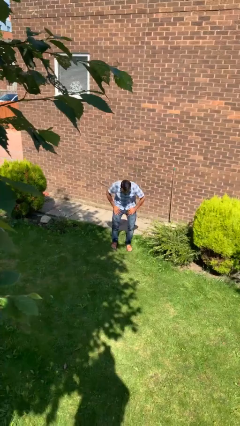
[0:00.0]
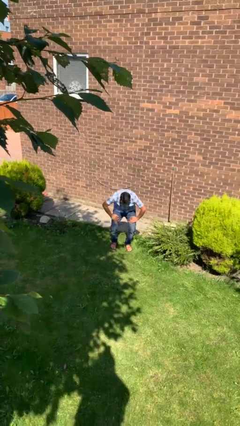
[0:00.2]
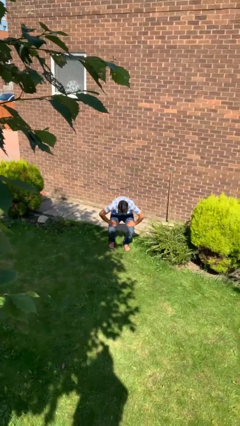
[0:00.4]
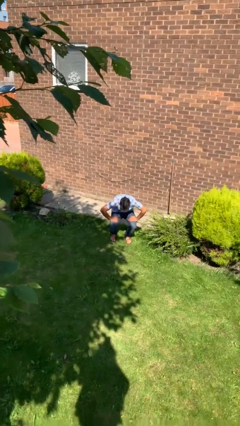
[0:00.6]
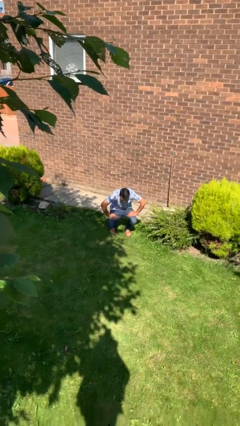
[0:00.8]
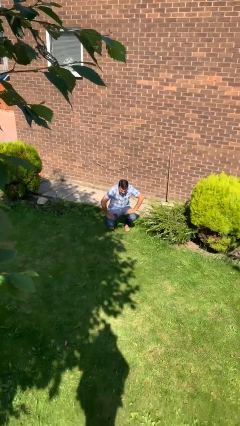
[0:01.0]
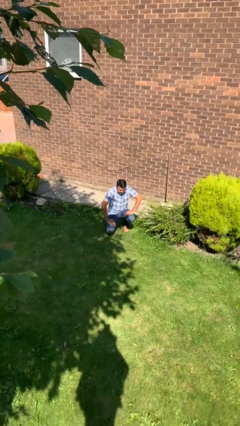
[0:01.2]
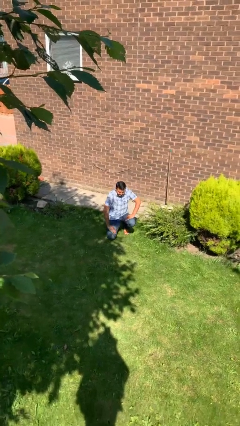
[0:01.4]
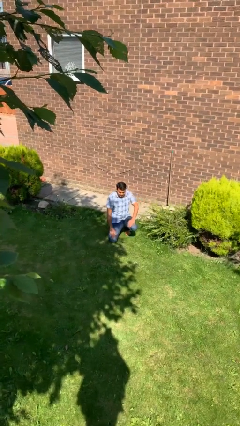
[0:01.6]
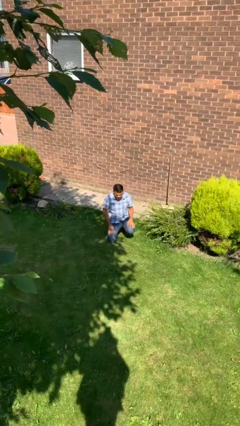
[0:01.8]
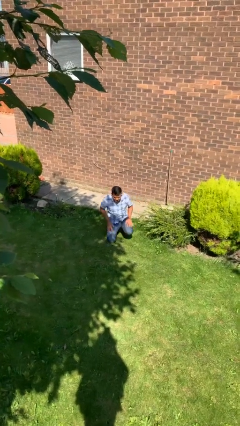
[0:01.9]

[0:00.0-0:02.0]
person kneels

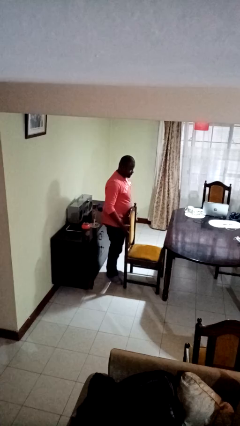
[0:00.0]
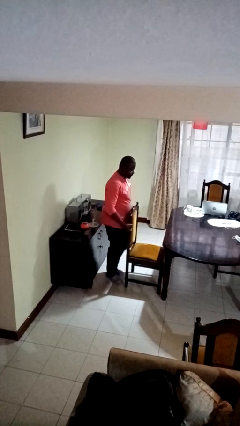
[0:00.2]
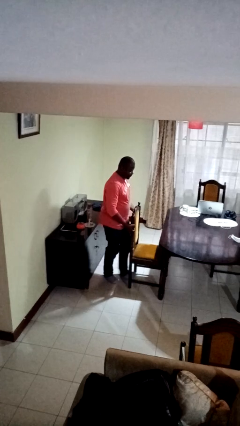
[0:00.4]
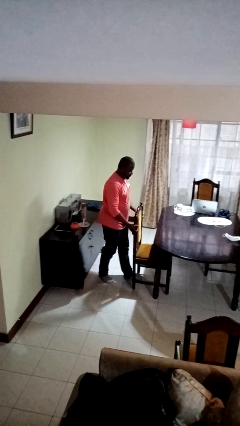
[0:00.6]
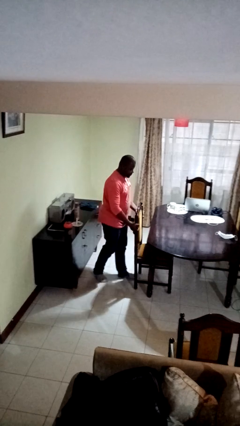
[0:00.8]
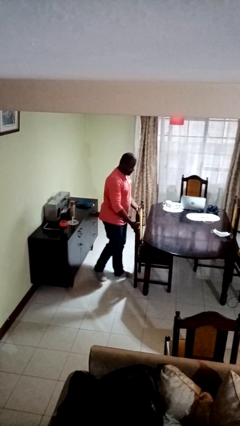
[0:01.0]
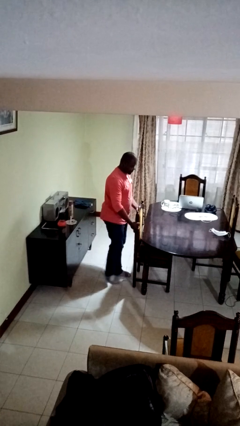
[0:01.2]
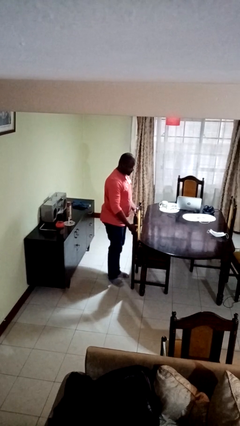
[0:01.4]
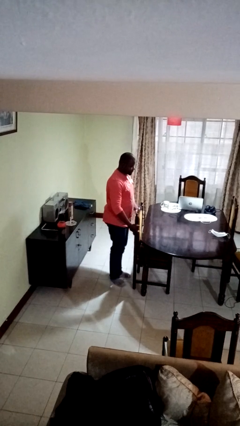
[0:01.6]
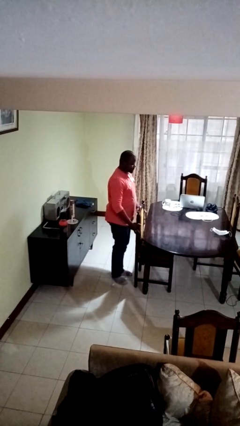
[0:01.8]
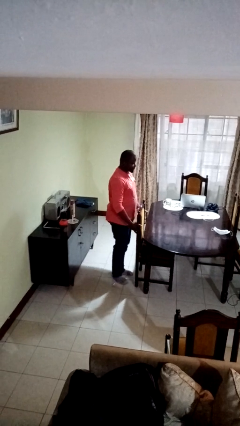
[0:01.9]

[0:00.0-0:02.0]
person pushes in chair

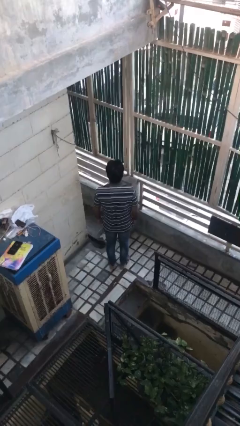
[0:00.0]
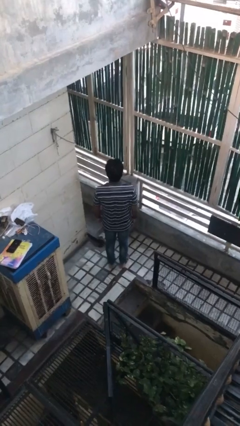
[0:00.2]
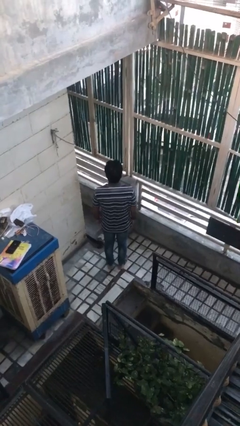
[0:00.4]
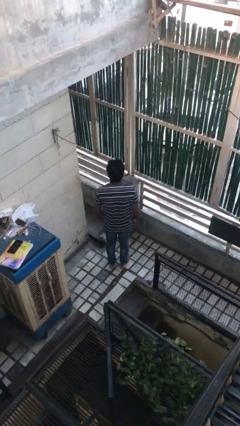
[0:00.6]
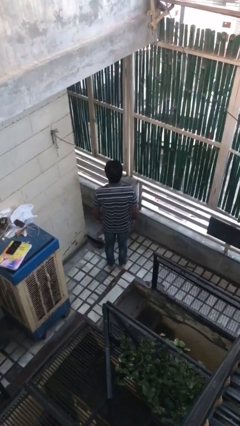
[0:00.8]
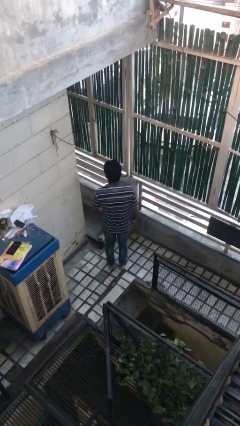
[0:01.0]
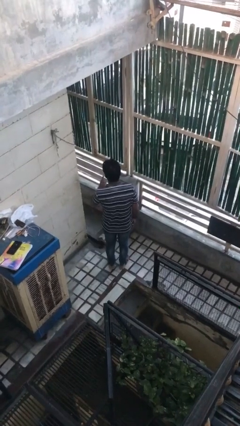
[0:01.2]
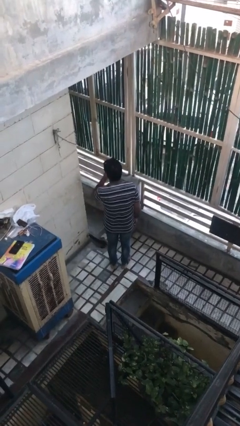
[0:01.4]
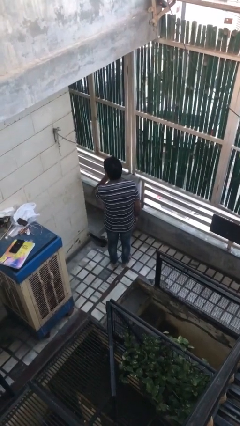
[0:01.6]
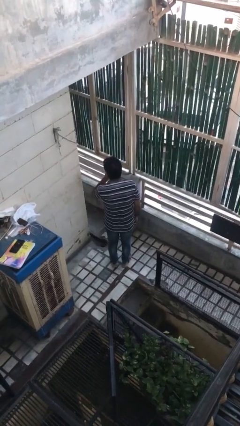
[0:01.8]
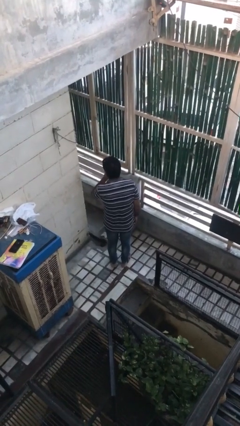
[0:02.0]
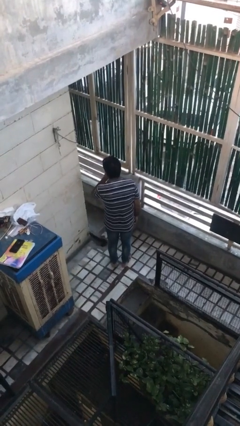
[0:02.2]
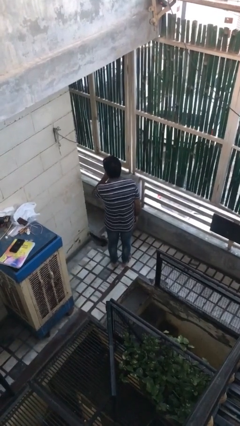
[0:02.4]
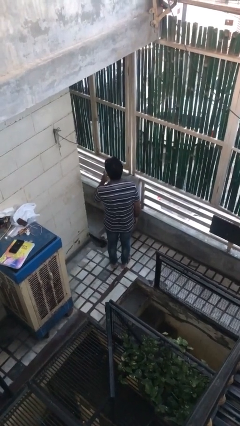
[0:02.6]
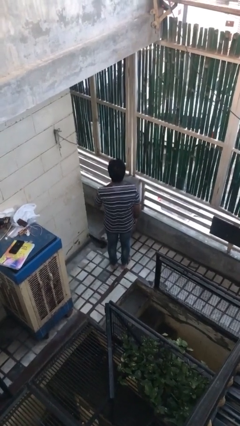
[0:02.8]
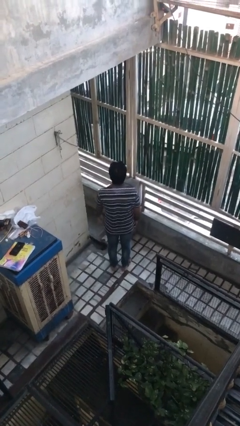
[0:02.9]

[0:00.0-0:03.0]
person gestures be quiet

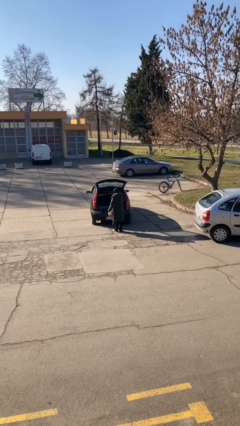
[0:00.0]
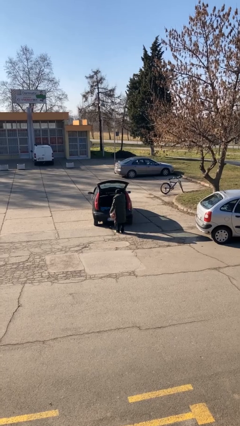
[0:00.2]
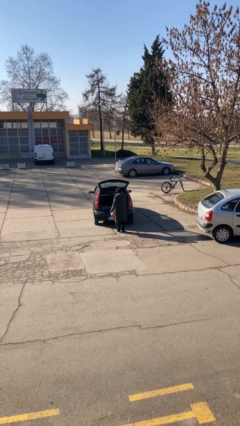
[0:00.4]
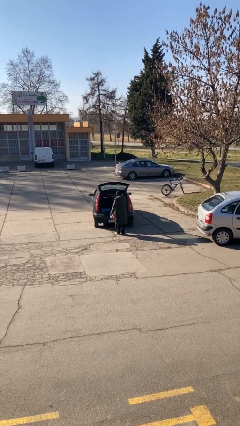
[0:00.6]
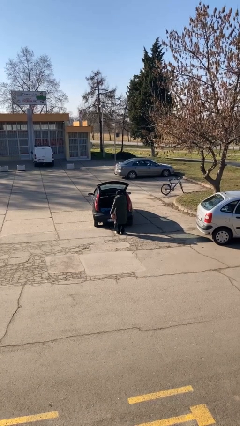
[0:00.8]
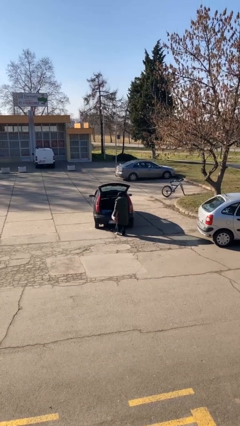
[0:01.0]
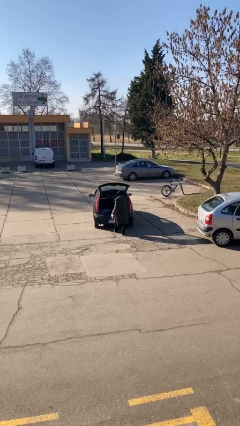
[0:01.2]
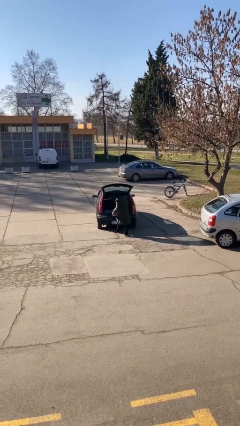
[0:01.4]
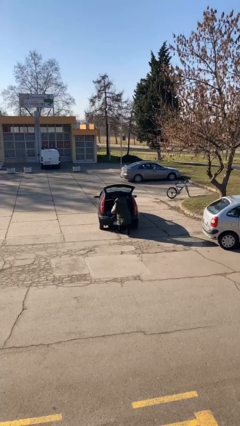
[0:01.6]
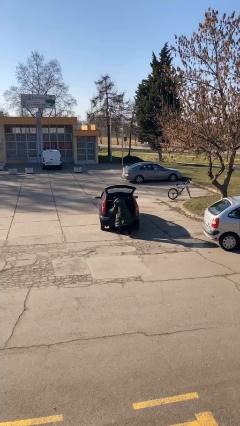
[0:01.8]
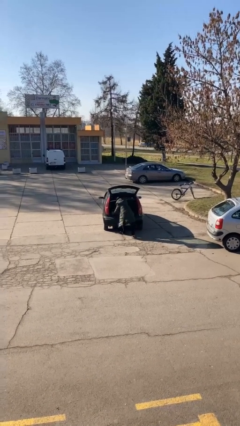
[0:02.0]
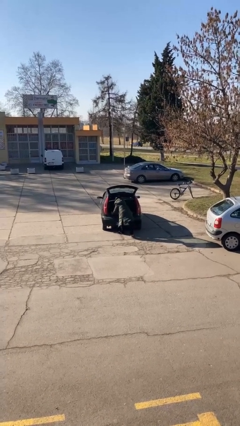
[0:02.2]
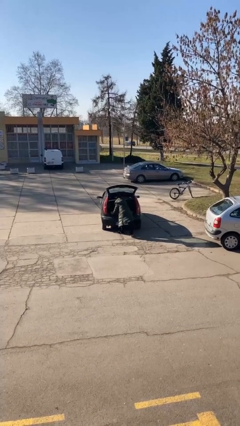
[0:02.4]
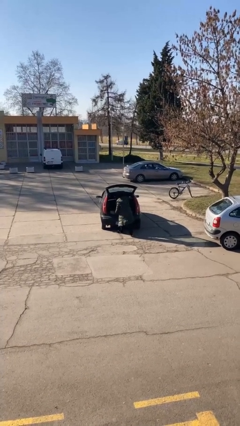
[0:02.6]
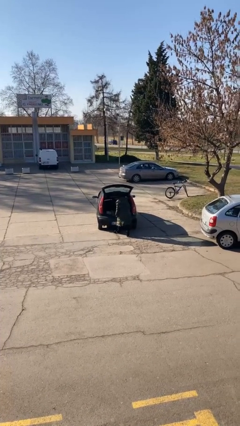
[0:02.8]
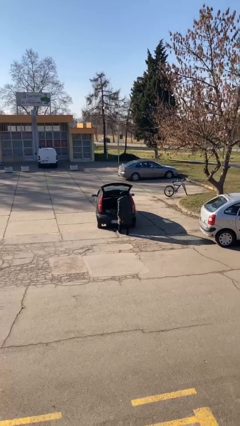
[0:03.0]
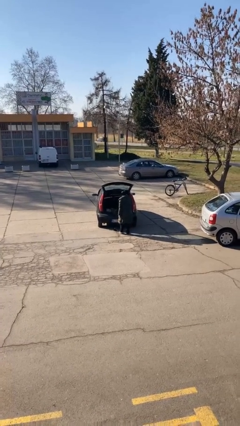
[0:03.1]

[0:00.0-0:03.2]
person loads car

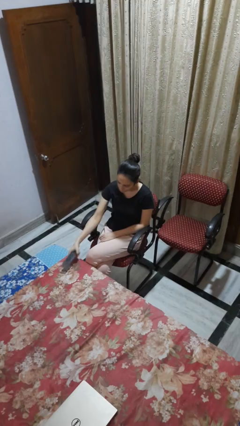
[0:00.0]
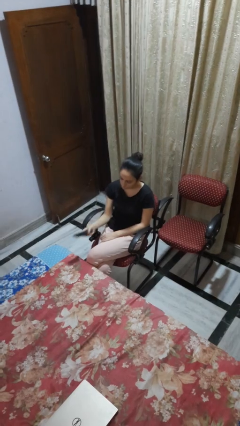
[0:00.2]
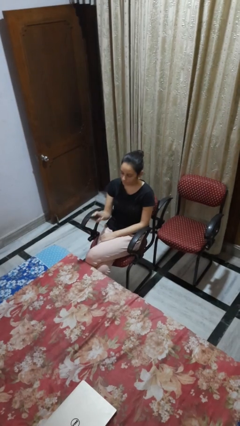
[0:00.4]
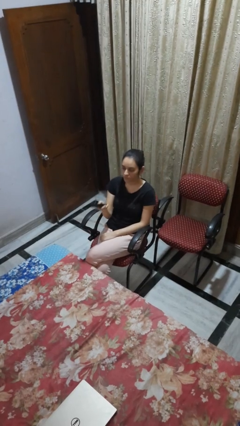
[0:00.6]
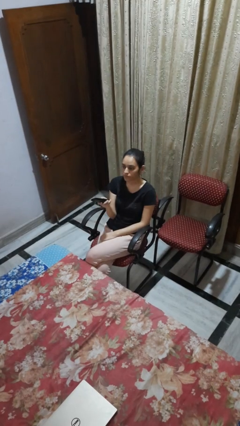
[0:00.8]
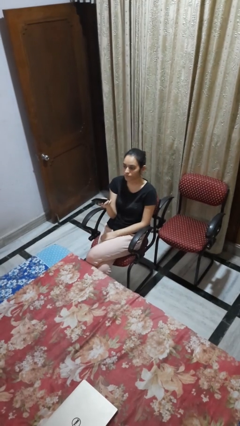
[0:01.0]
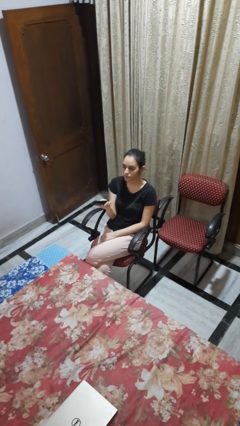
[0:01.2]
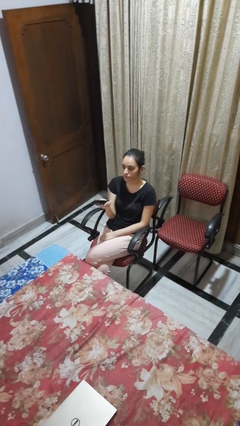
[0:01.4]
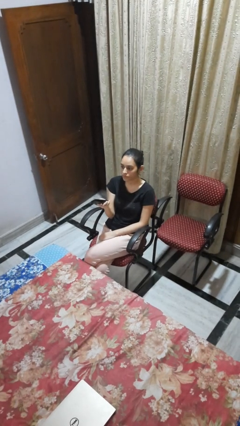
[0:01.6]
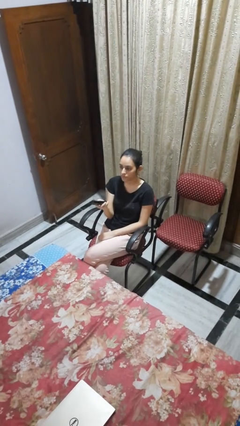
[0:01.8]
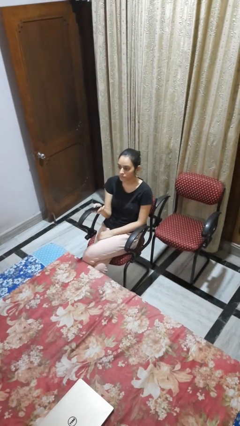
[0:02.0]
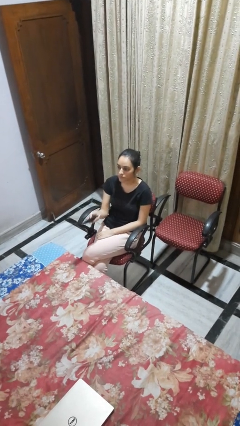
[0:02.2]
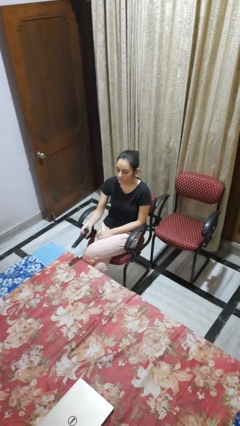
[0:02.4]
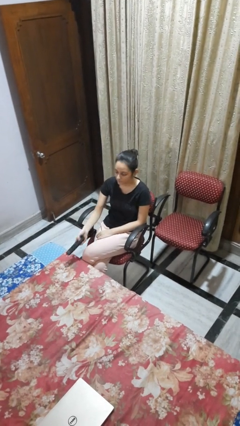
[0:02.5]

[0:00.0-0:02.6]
person uses television remote

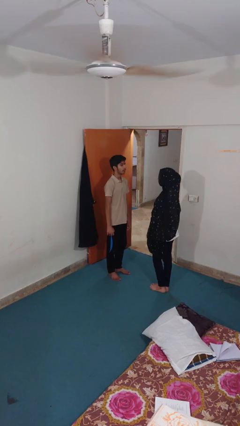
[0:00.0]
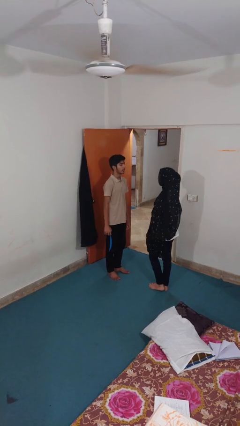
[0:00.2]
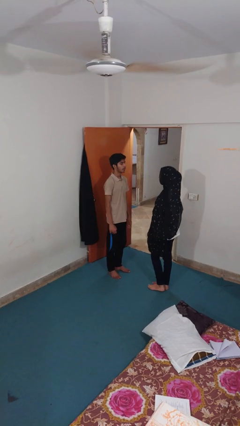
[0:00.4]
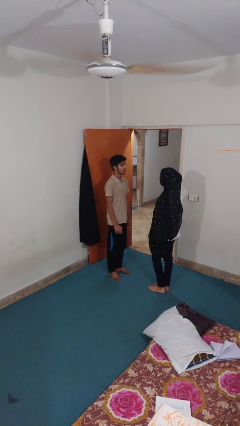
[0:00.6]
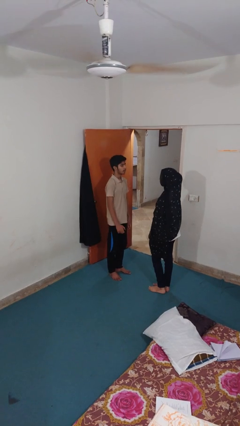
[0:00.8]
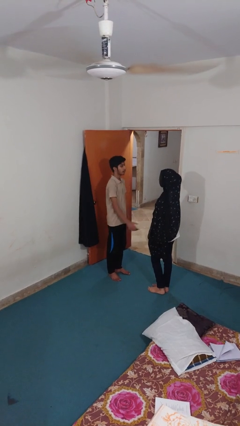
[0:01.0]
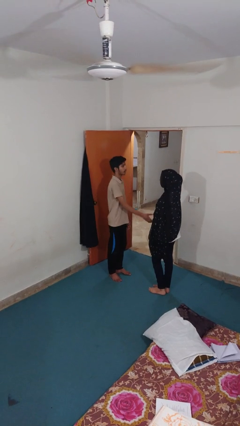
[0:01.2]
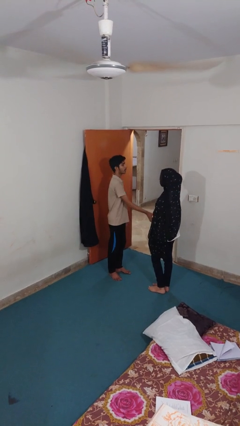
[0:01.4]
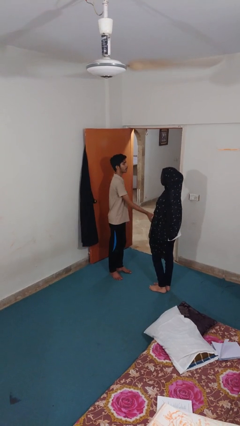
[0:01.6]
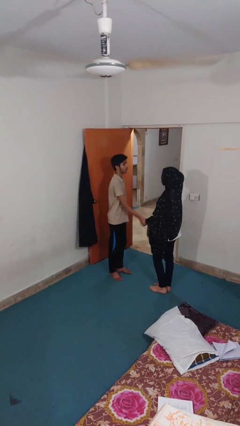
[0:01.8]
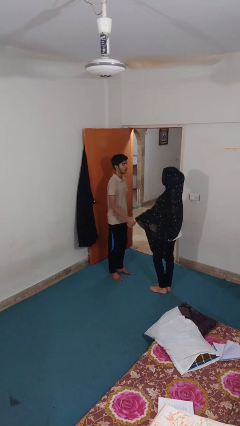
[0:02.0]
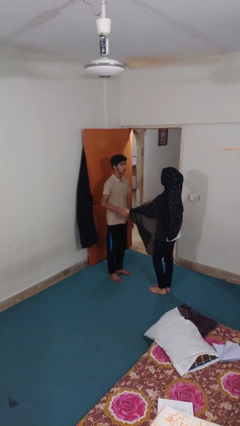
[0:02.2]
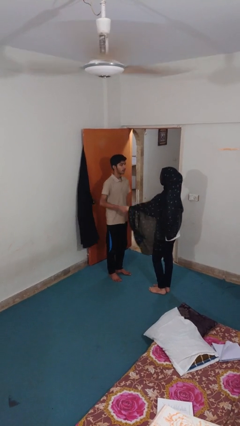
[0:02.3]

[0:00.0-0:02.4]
person grabs person by forearm

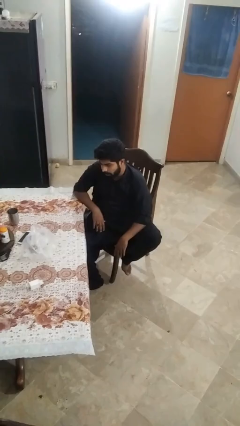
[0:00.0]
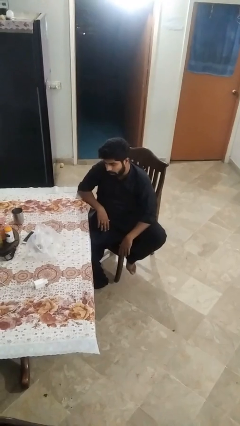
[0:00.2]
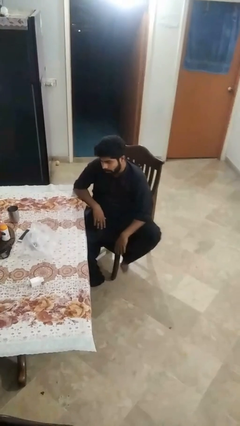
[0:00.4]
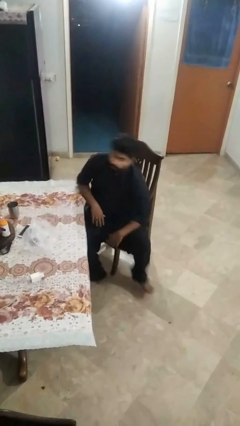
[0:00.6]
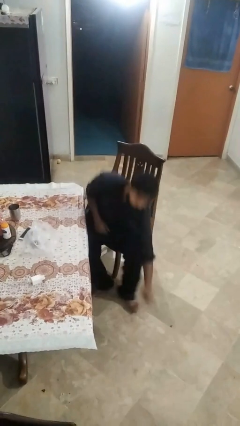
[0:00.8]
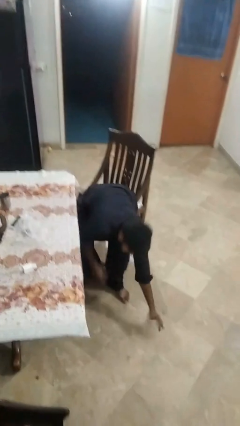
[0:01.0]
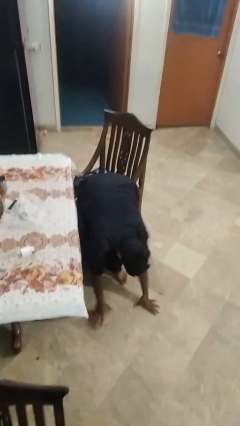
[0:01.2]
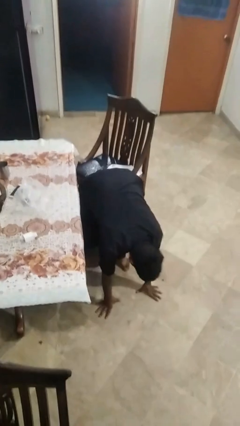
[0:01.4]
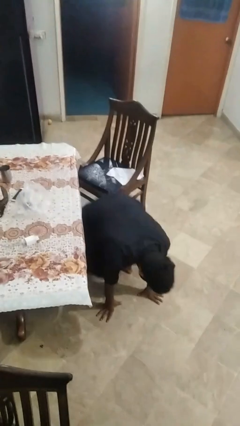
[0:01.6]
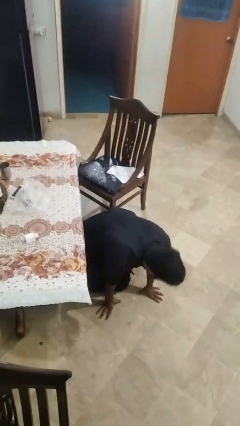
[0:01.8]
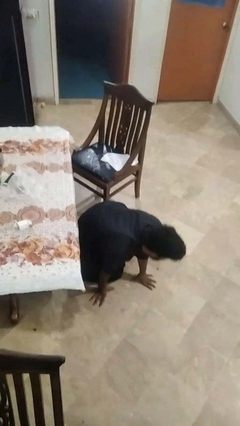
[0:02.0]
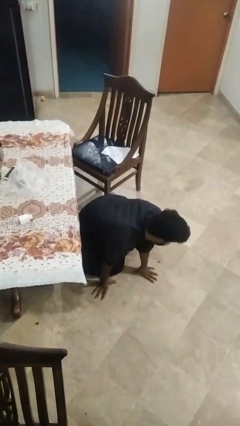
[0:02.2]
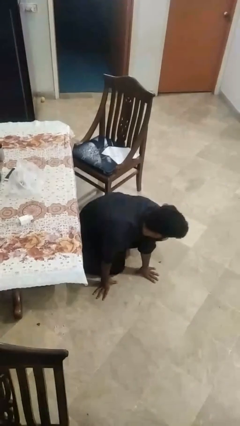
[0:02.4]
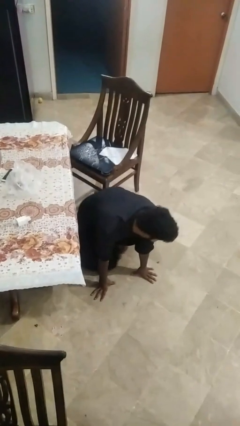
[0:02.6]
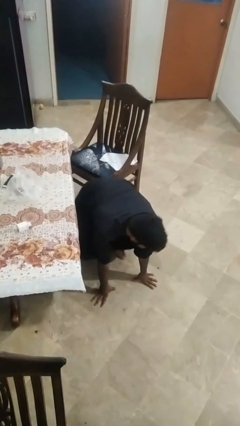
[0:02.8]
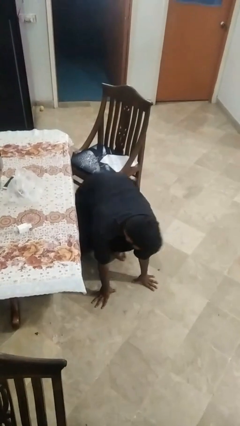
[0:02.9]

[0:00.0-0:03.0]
person falls from chair
